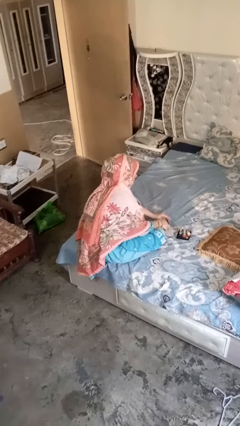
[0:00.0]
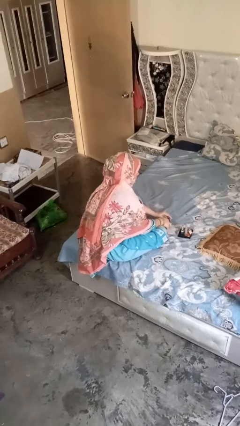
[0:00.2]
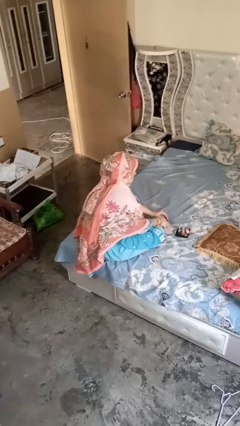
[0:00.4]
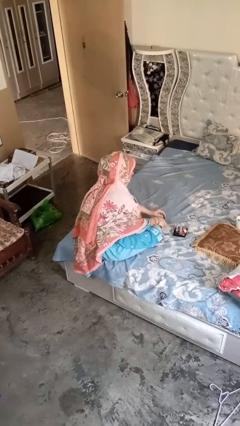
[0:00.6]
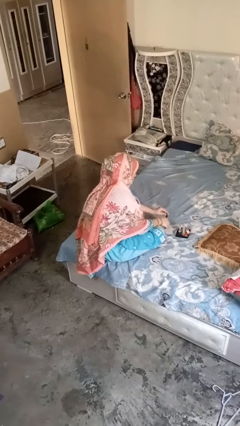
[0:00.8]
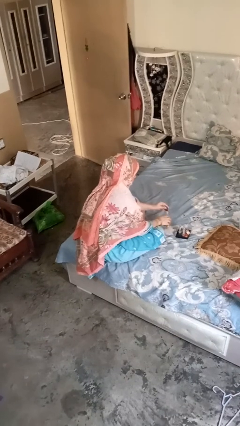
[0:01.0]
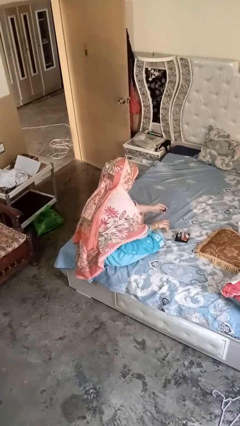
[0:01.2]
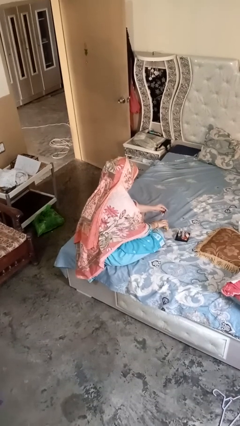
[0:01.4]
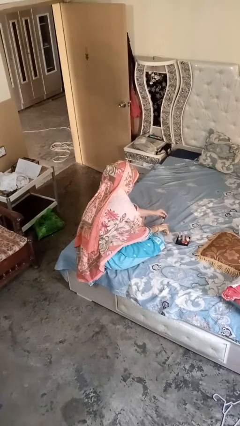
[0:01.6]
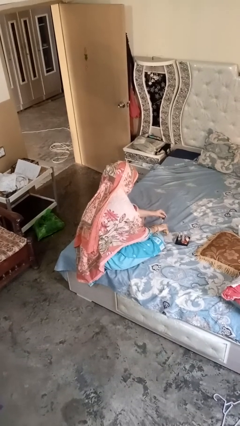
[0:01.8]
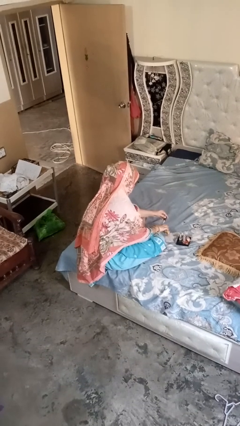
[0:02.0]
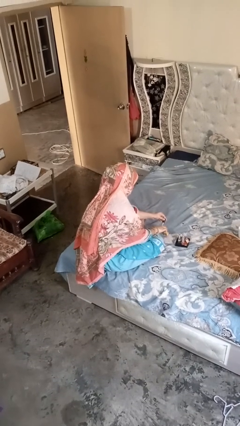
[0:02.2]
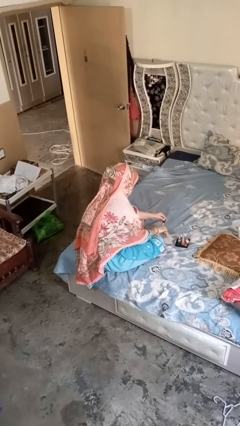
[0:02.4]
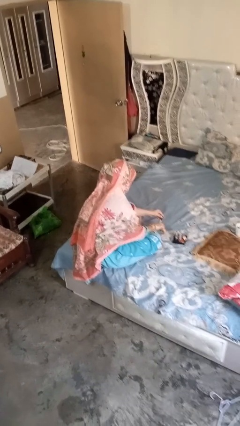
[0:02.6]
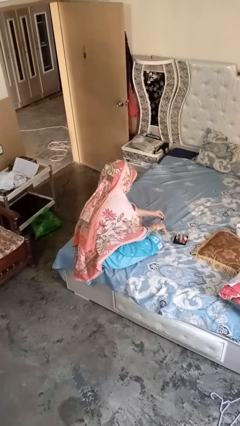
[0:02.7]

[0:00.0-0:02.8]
person paints fingernails

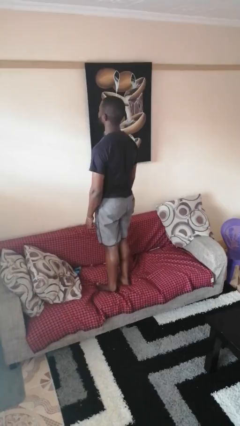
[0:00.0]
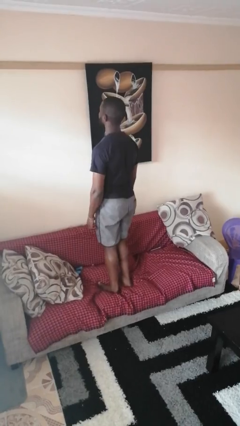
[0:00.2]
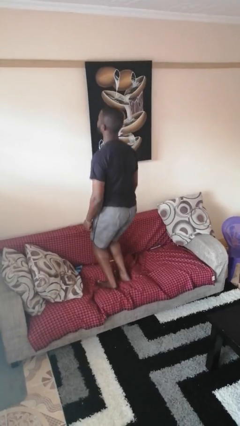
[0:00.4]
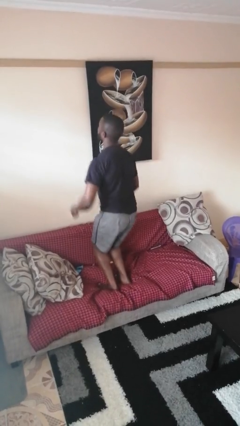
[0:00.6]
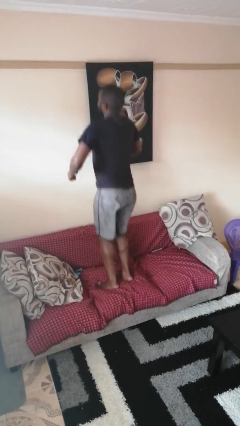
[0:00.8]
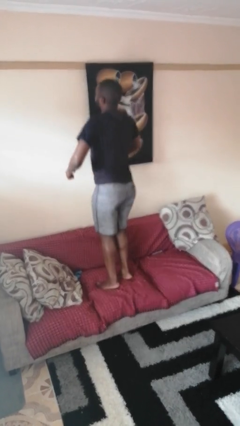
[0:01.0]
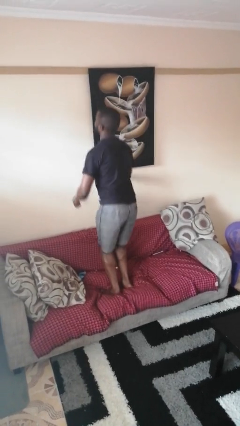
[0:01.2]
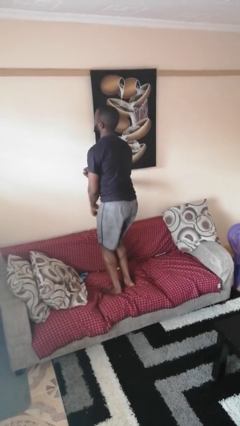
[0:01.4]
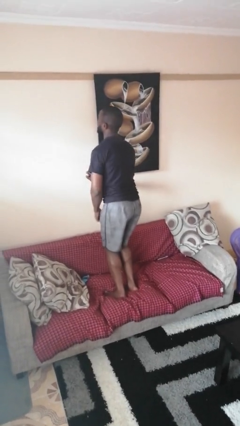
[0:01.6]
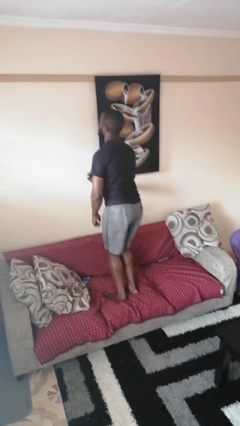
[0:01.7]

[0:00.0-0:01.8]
person jumps on couch

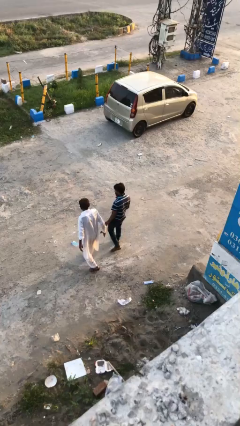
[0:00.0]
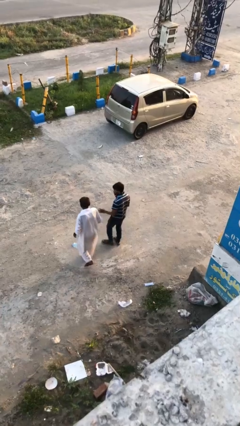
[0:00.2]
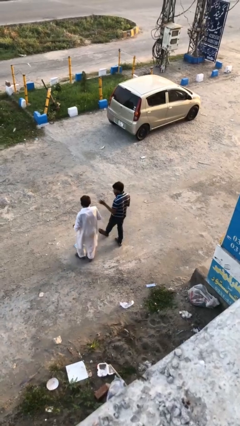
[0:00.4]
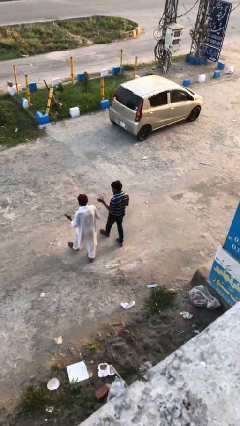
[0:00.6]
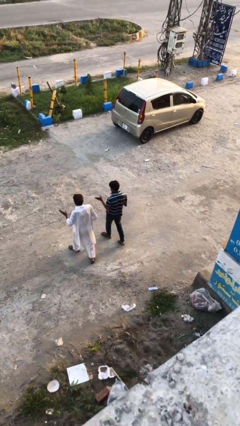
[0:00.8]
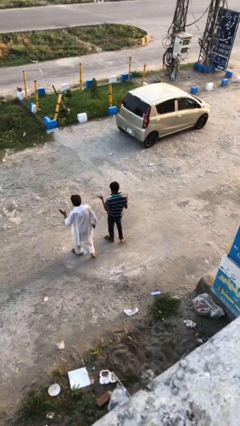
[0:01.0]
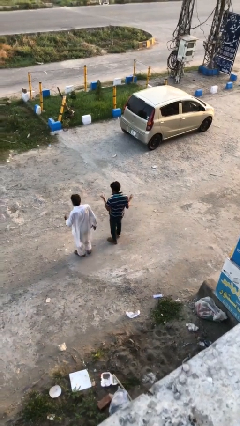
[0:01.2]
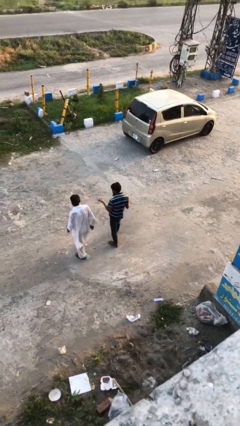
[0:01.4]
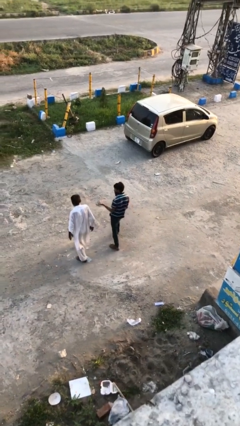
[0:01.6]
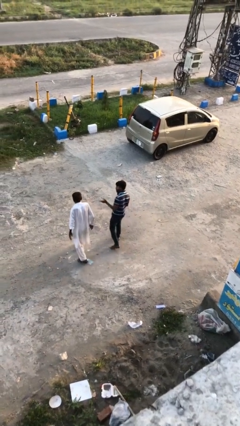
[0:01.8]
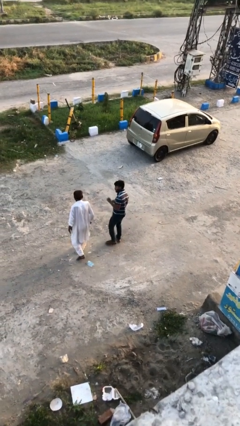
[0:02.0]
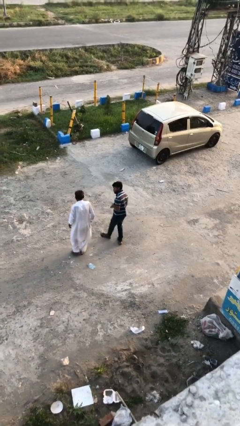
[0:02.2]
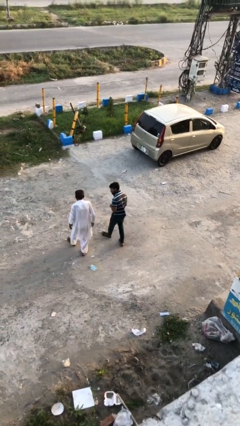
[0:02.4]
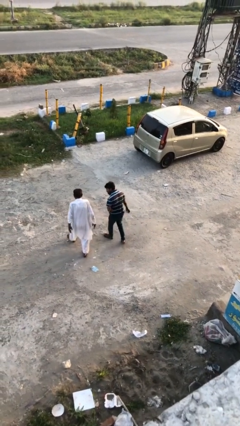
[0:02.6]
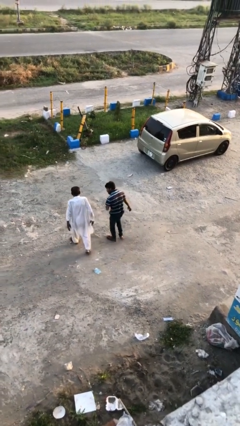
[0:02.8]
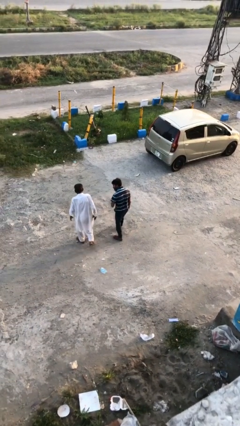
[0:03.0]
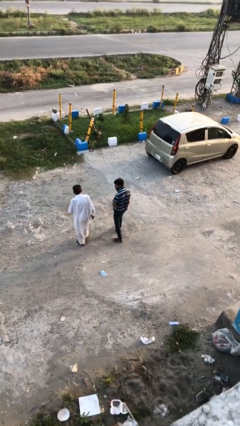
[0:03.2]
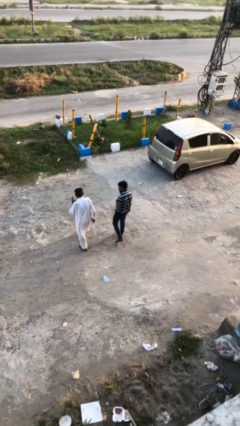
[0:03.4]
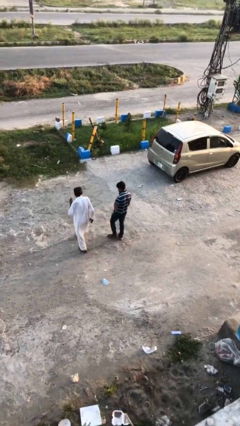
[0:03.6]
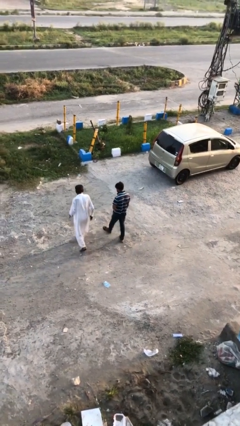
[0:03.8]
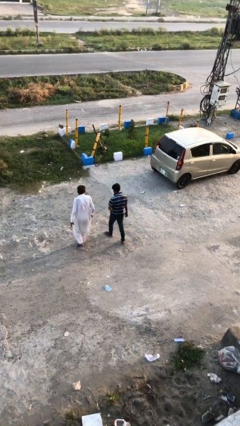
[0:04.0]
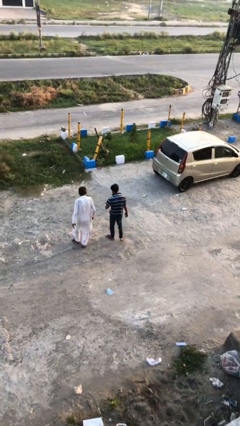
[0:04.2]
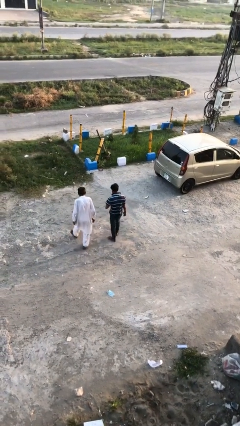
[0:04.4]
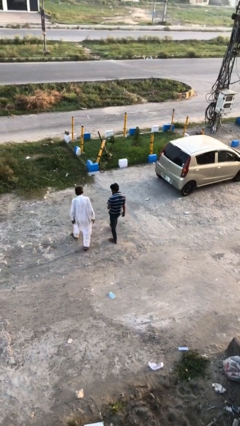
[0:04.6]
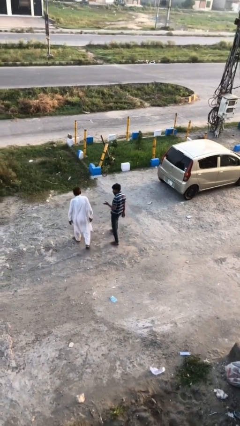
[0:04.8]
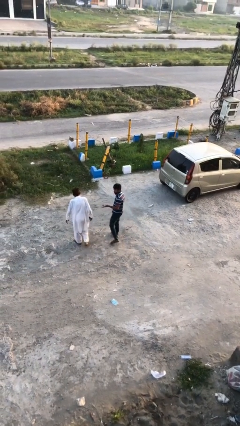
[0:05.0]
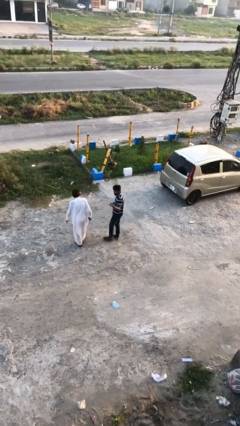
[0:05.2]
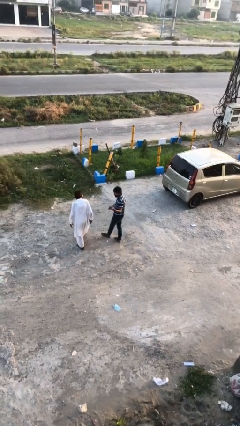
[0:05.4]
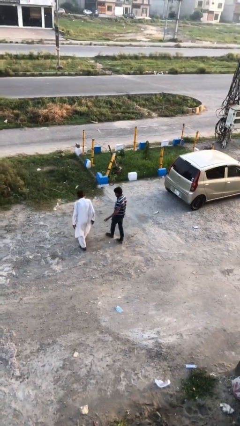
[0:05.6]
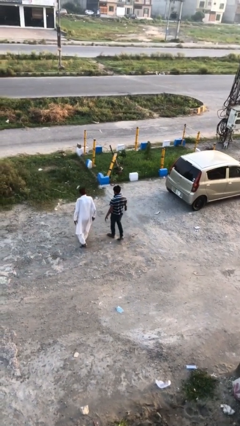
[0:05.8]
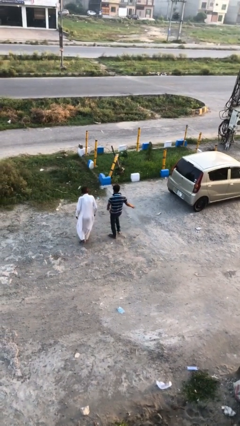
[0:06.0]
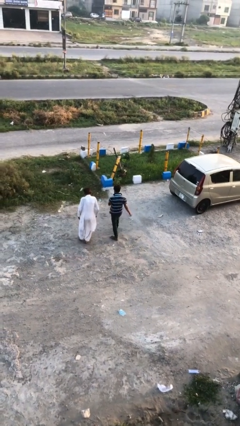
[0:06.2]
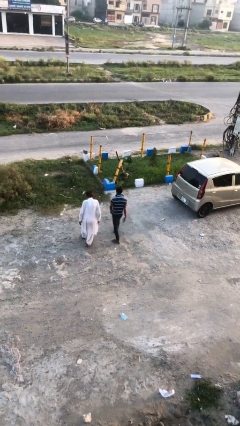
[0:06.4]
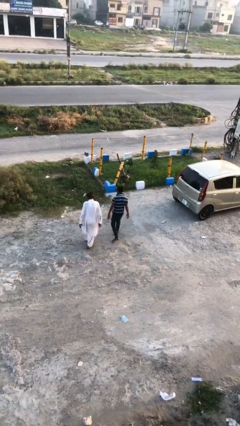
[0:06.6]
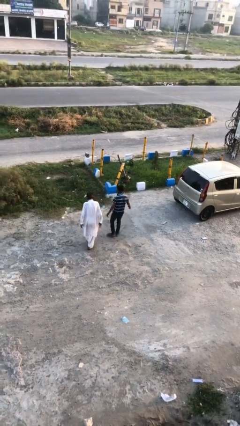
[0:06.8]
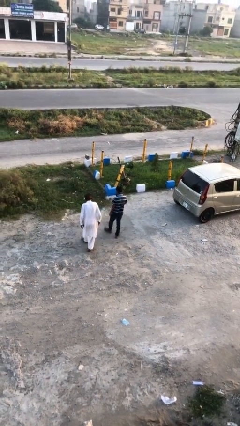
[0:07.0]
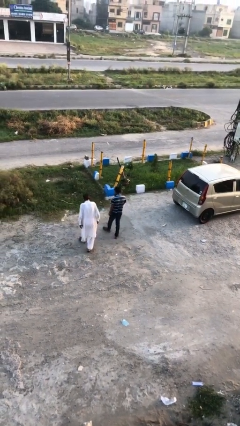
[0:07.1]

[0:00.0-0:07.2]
person talks to person

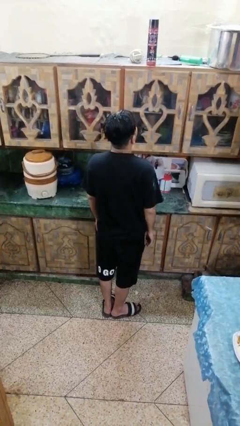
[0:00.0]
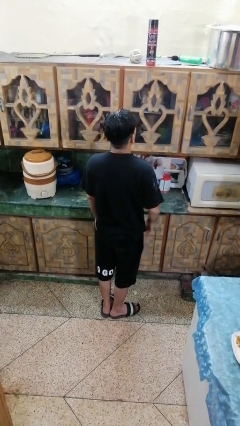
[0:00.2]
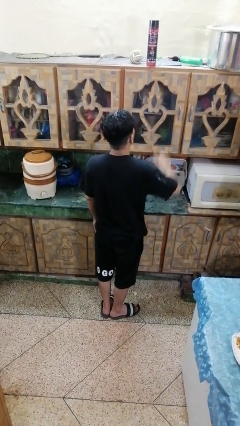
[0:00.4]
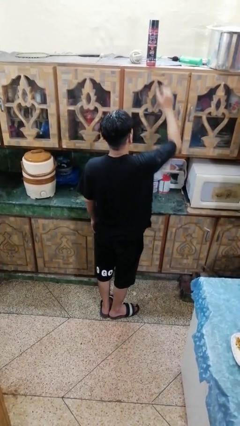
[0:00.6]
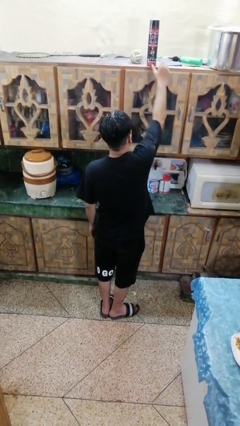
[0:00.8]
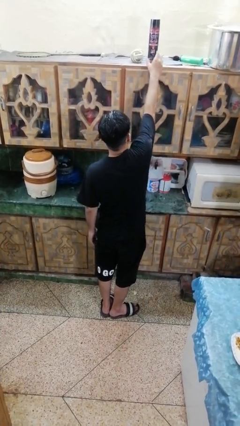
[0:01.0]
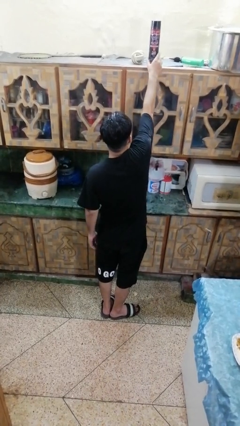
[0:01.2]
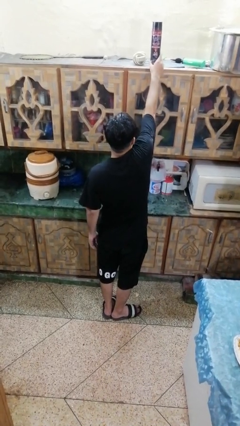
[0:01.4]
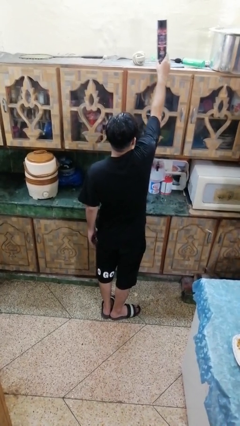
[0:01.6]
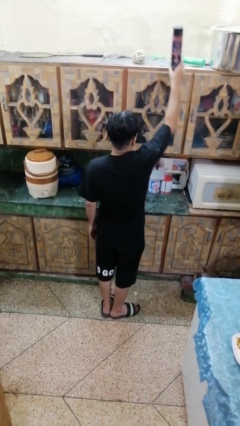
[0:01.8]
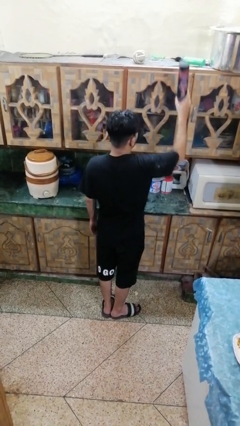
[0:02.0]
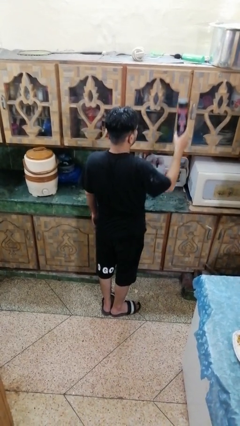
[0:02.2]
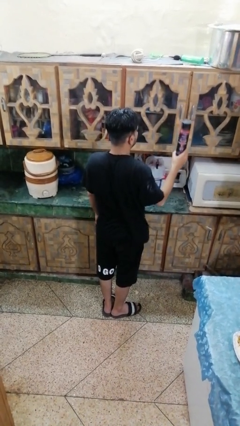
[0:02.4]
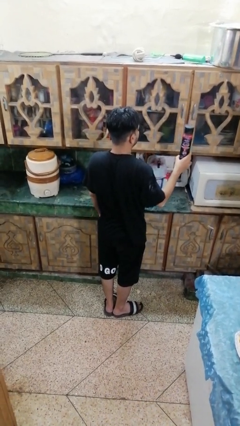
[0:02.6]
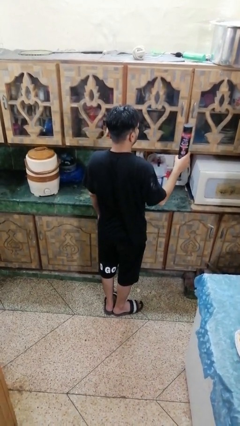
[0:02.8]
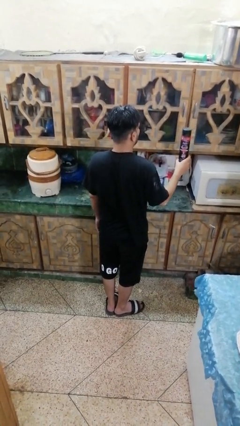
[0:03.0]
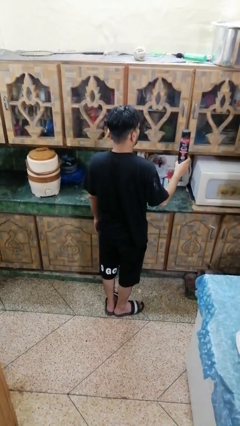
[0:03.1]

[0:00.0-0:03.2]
person picks up object from countertop

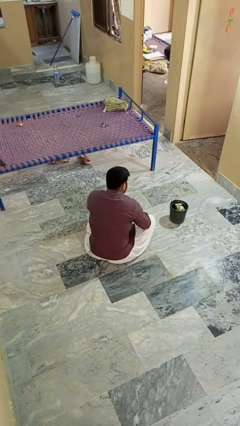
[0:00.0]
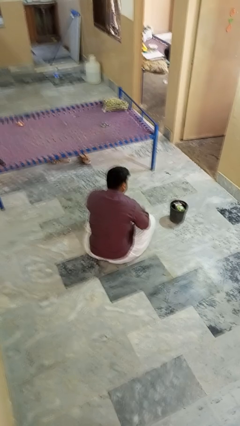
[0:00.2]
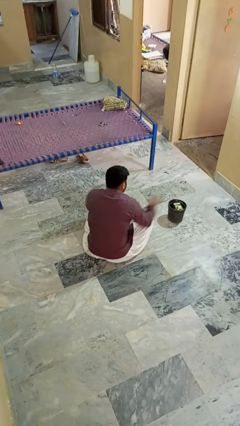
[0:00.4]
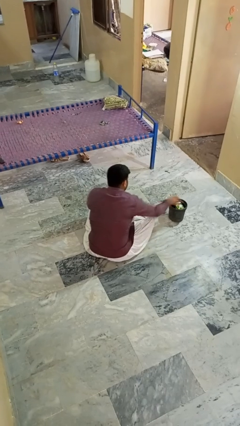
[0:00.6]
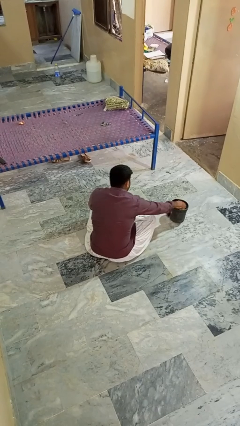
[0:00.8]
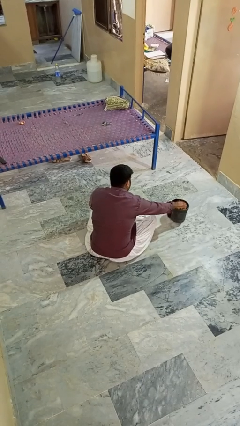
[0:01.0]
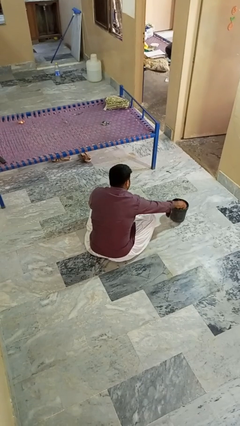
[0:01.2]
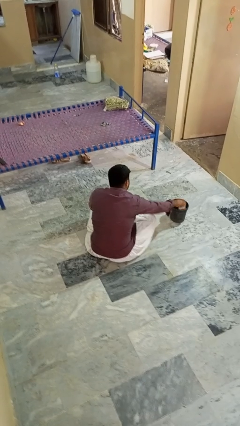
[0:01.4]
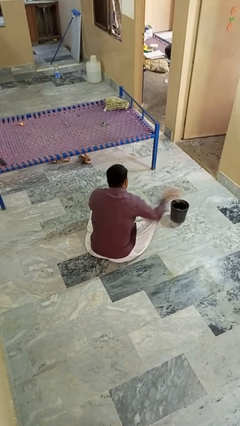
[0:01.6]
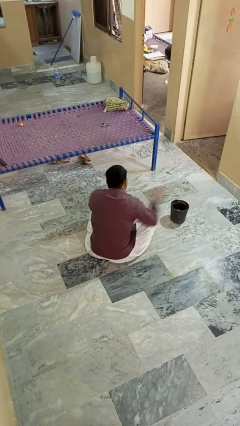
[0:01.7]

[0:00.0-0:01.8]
person takes object from basket

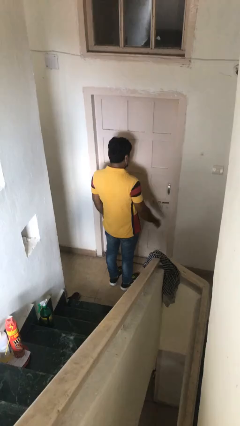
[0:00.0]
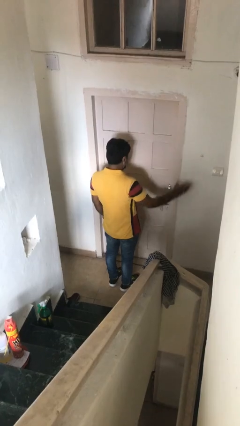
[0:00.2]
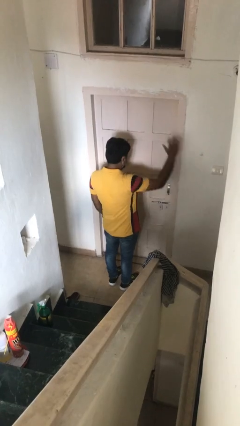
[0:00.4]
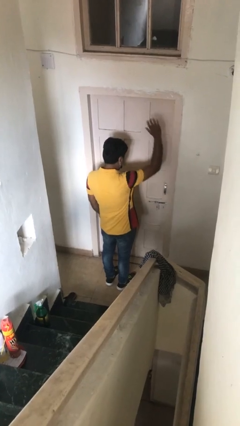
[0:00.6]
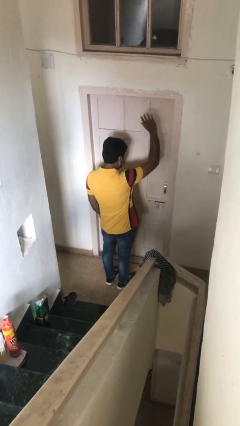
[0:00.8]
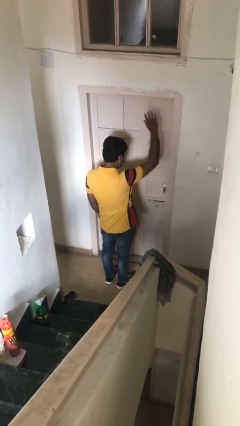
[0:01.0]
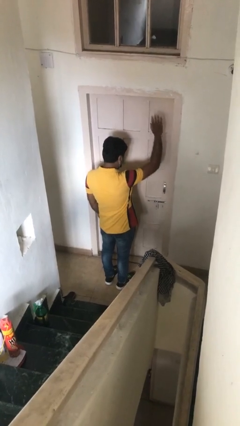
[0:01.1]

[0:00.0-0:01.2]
person gestures raise hand
